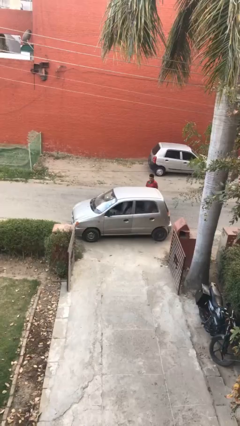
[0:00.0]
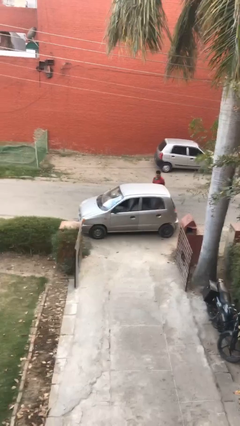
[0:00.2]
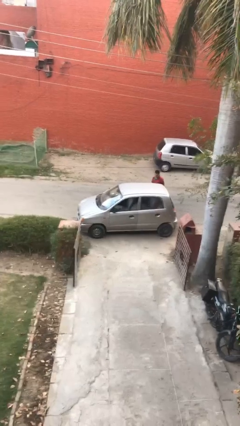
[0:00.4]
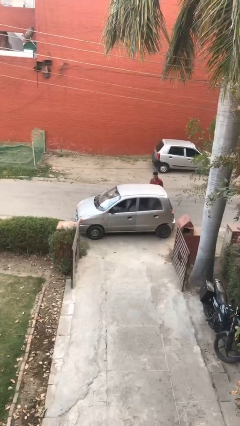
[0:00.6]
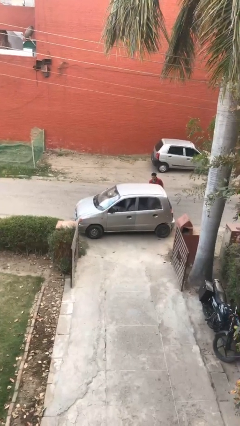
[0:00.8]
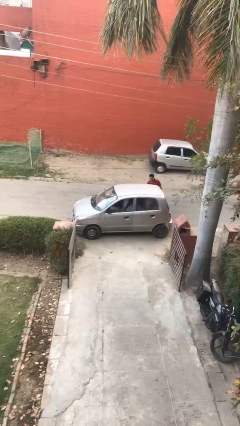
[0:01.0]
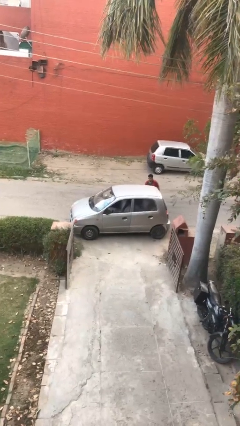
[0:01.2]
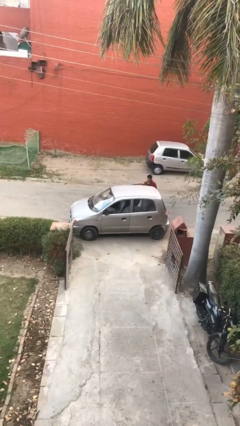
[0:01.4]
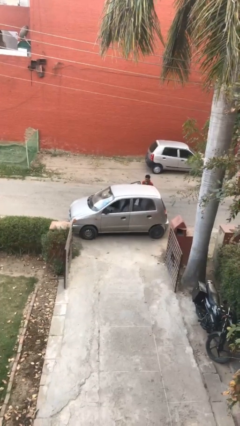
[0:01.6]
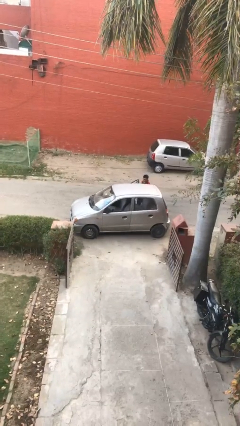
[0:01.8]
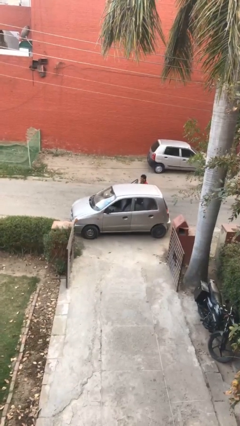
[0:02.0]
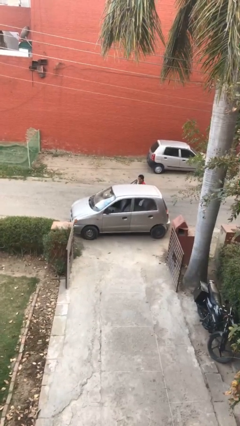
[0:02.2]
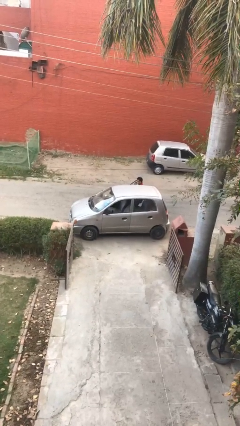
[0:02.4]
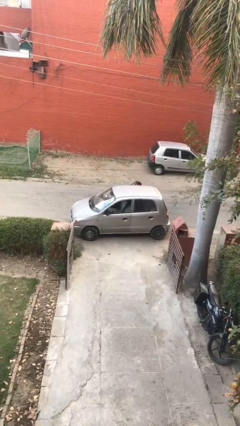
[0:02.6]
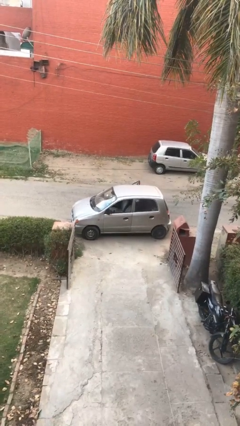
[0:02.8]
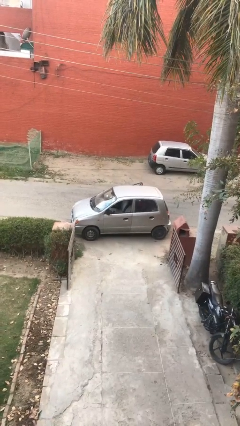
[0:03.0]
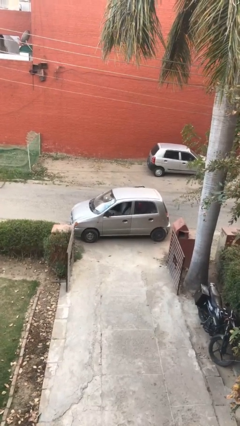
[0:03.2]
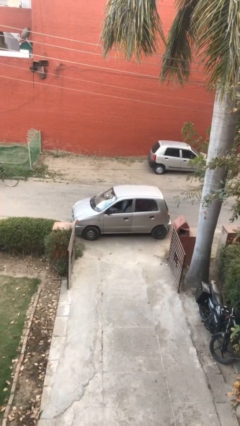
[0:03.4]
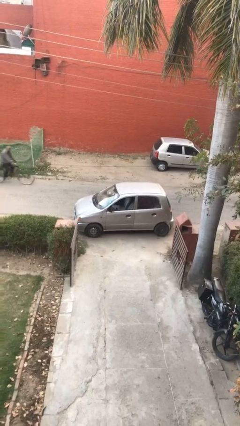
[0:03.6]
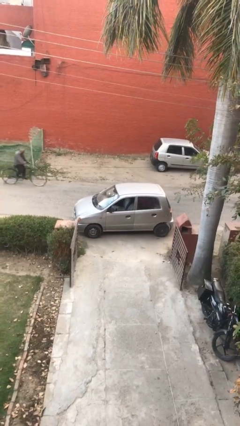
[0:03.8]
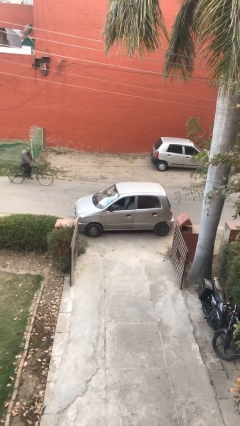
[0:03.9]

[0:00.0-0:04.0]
car picks up person

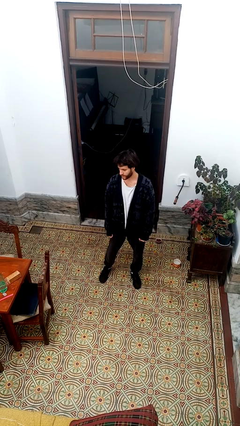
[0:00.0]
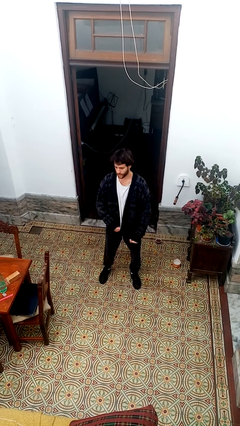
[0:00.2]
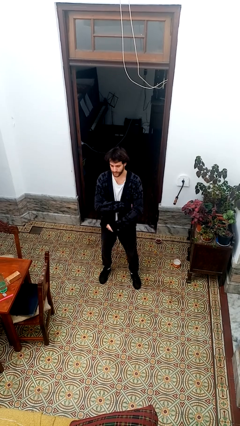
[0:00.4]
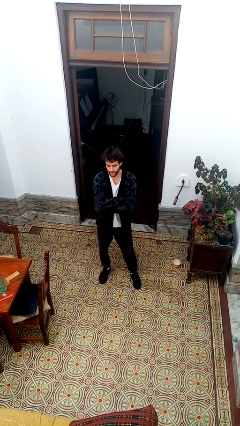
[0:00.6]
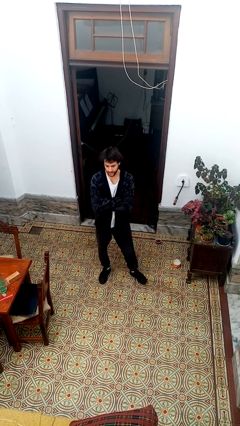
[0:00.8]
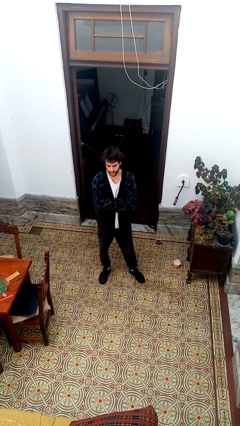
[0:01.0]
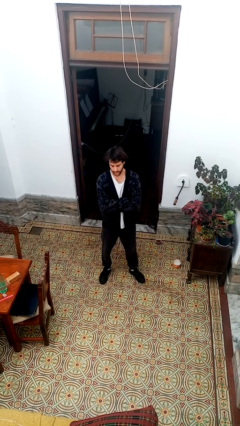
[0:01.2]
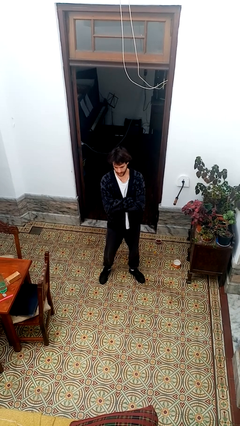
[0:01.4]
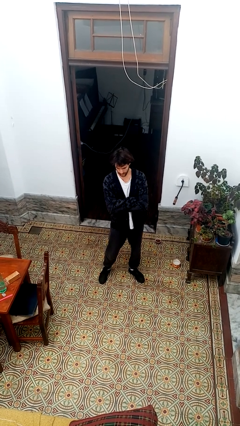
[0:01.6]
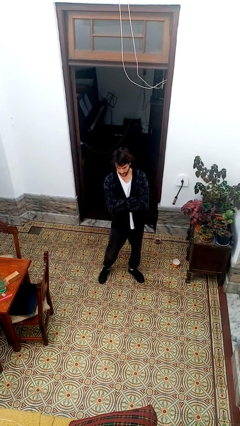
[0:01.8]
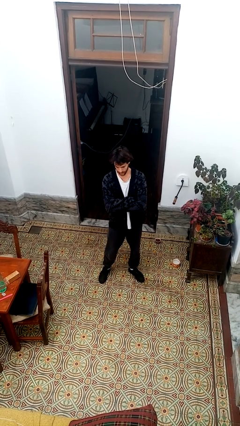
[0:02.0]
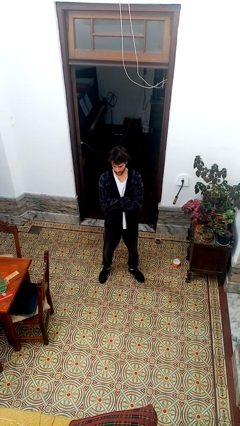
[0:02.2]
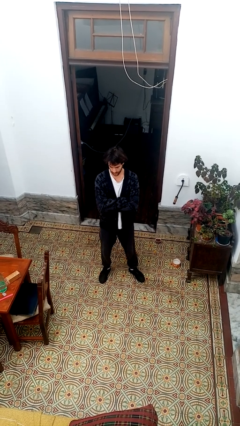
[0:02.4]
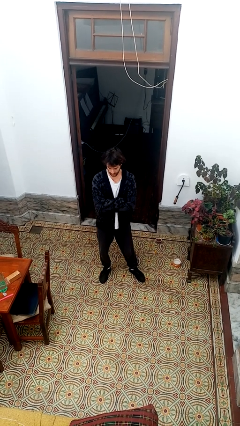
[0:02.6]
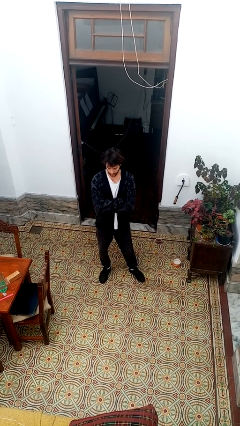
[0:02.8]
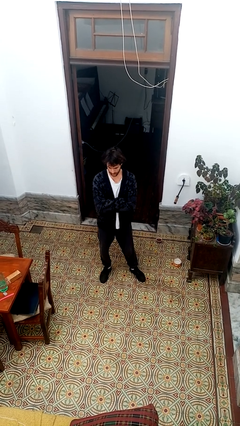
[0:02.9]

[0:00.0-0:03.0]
person crosses arms

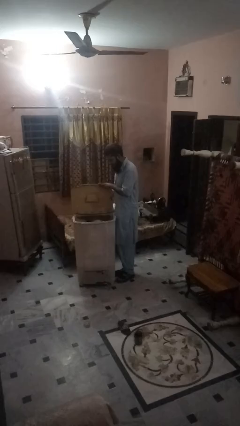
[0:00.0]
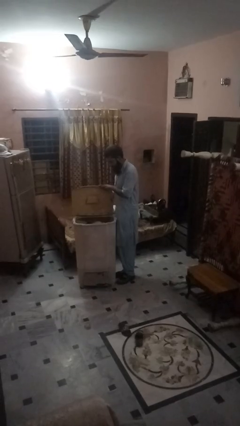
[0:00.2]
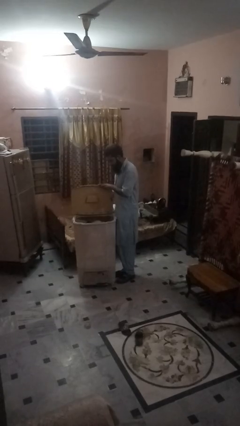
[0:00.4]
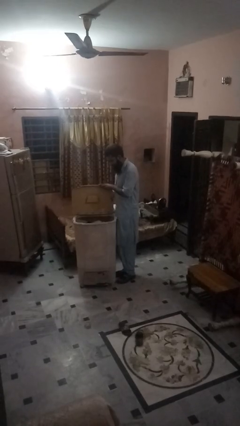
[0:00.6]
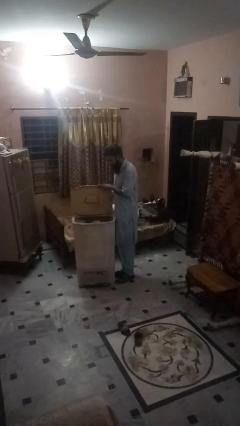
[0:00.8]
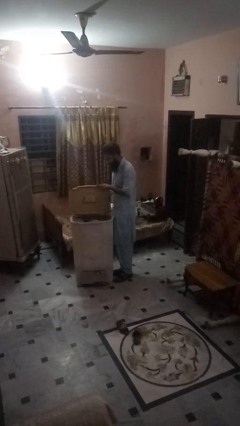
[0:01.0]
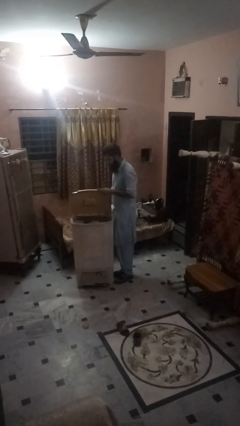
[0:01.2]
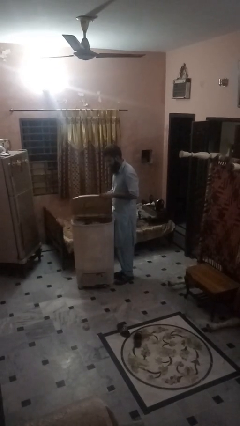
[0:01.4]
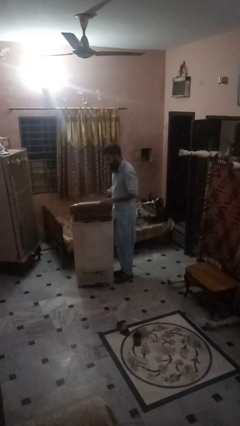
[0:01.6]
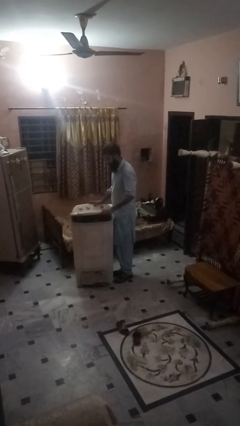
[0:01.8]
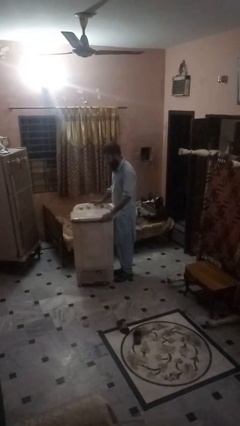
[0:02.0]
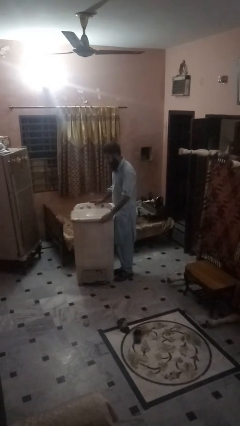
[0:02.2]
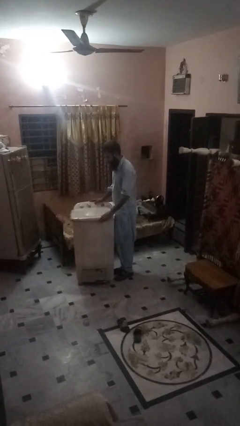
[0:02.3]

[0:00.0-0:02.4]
person closes clothes washer

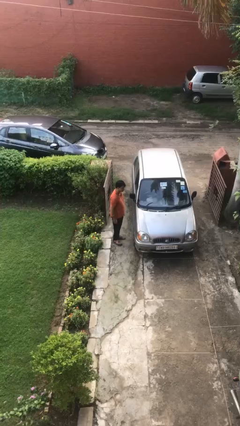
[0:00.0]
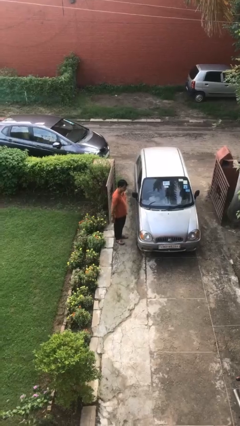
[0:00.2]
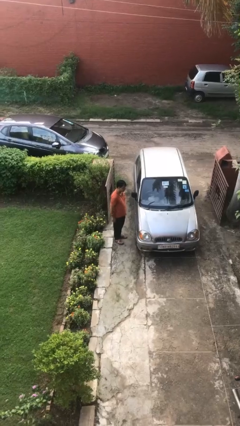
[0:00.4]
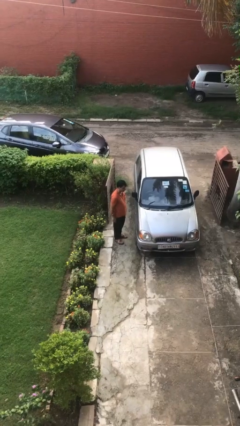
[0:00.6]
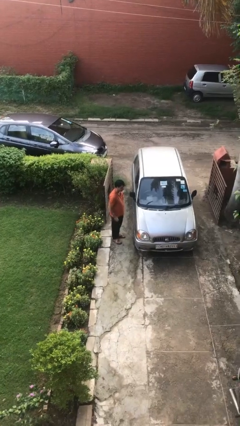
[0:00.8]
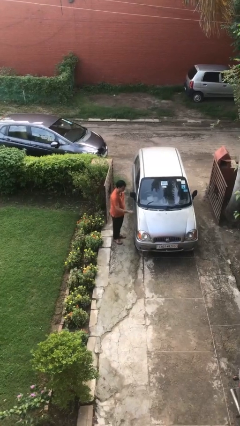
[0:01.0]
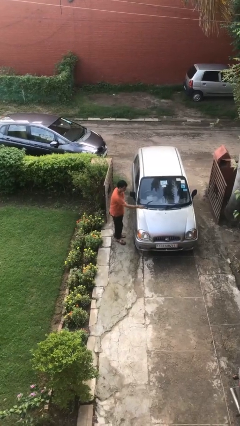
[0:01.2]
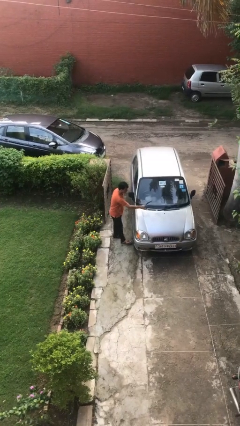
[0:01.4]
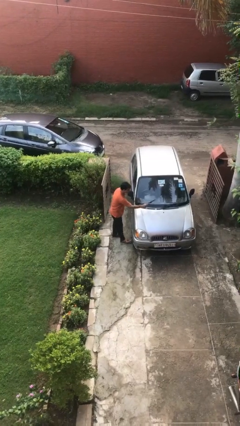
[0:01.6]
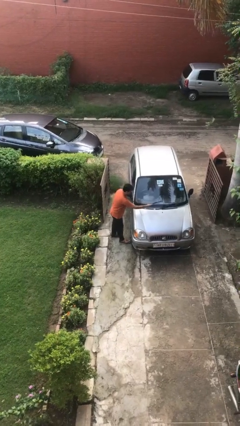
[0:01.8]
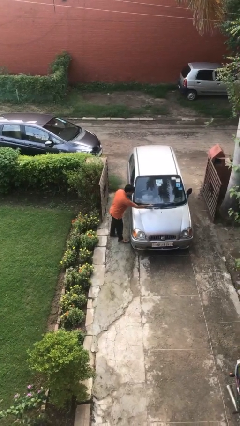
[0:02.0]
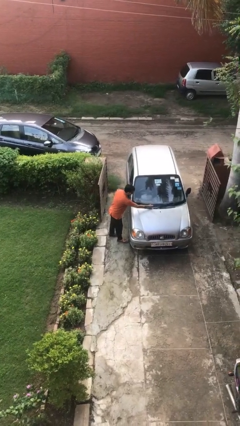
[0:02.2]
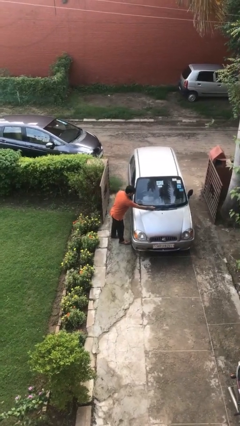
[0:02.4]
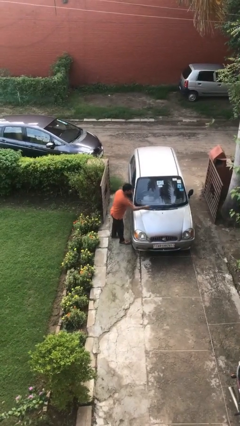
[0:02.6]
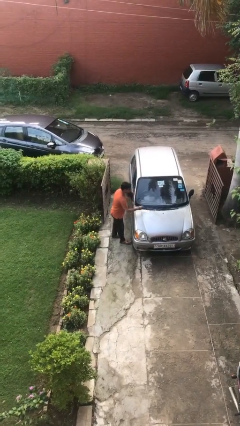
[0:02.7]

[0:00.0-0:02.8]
person flips down car wipers

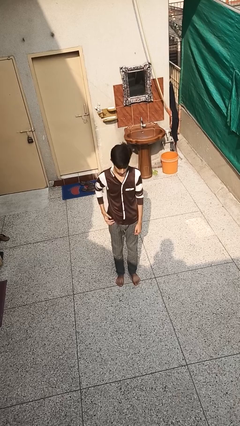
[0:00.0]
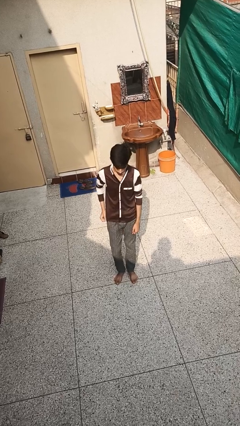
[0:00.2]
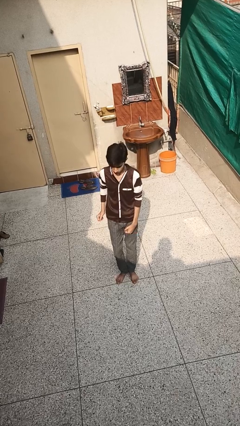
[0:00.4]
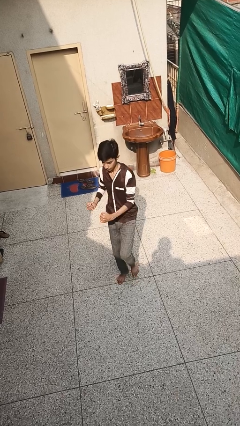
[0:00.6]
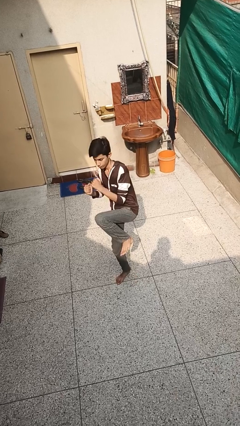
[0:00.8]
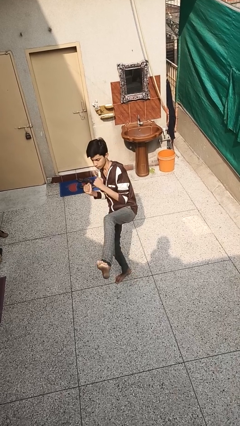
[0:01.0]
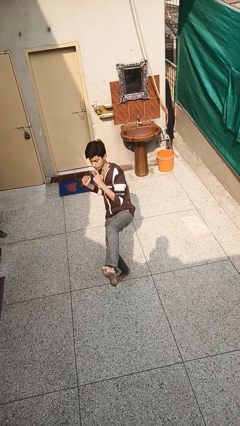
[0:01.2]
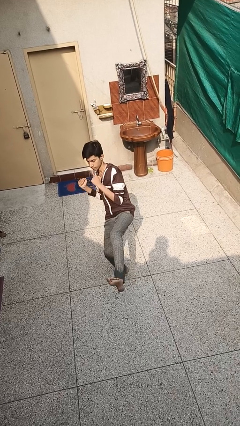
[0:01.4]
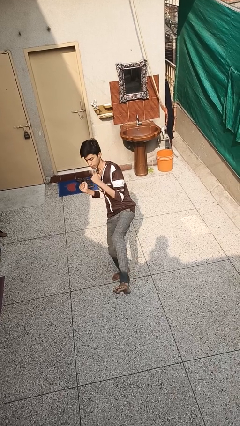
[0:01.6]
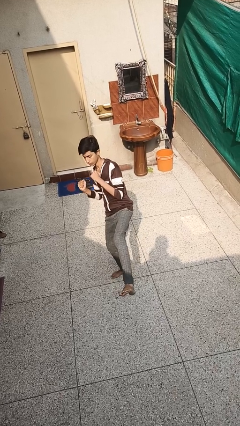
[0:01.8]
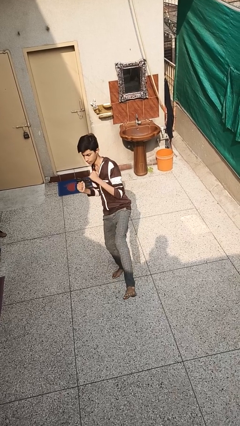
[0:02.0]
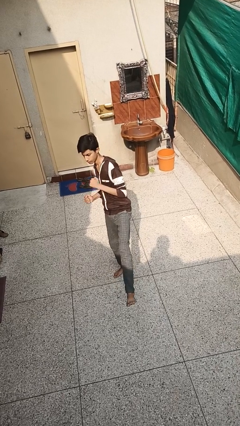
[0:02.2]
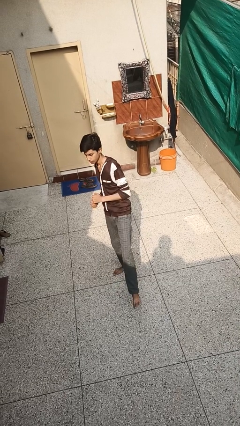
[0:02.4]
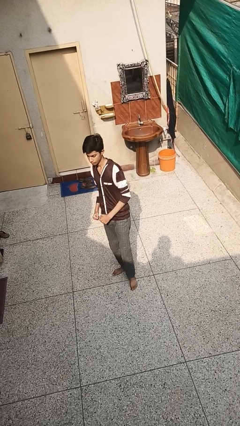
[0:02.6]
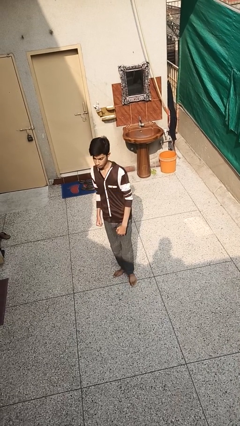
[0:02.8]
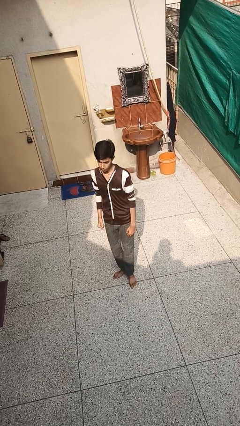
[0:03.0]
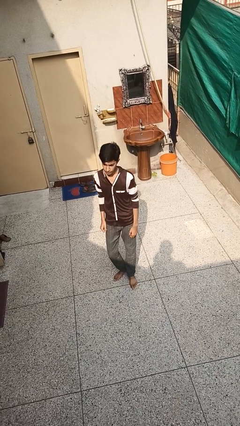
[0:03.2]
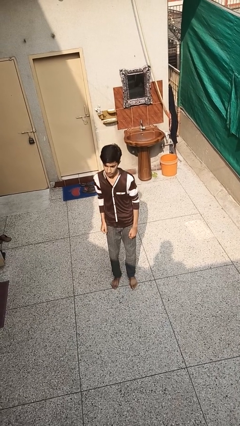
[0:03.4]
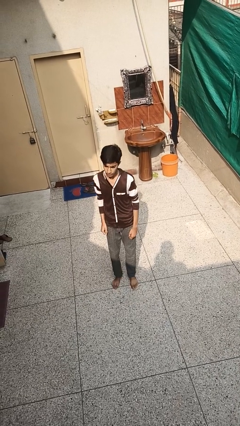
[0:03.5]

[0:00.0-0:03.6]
person karate kicks

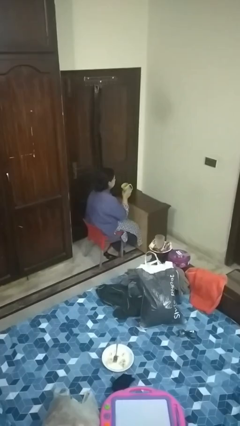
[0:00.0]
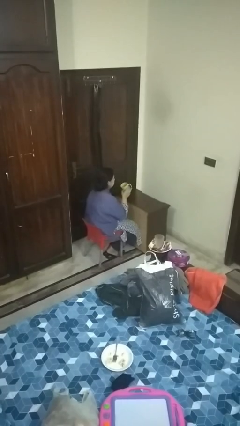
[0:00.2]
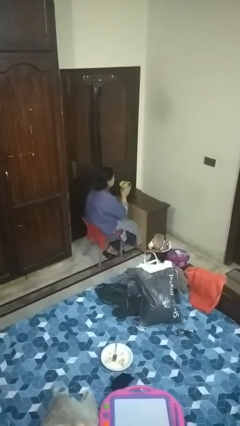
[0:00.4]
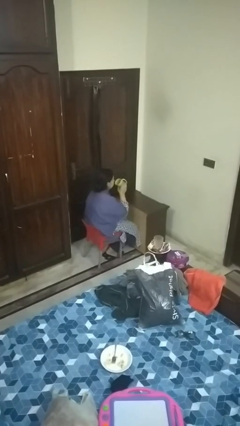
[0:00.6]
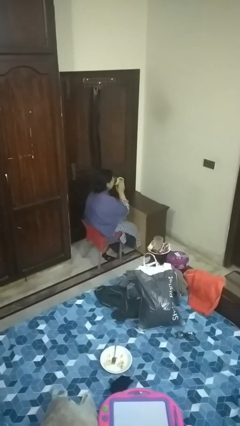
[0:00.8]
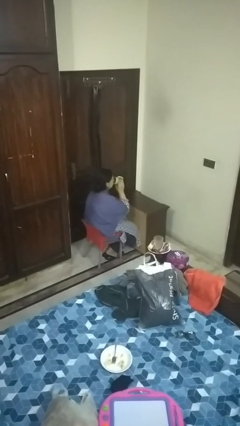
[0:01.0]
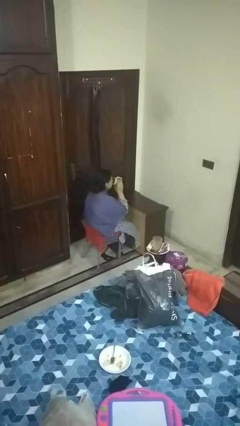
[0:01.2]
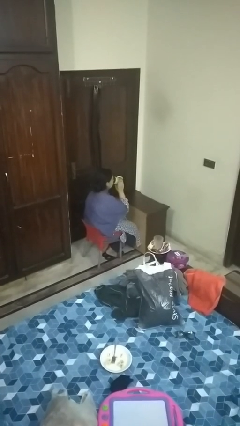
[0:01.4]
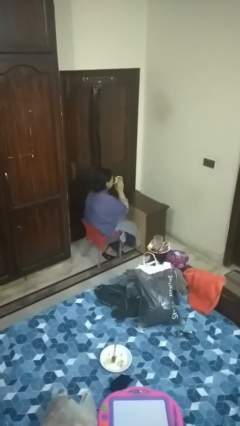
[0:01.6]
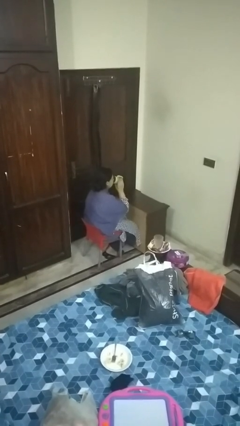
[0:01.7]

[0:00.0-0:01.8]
person drinks from mug
